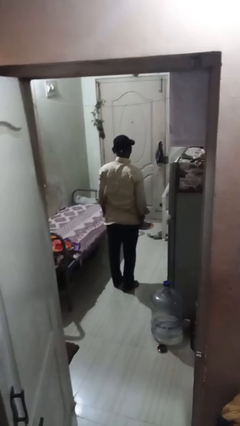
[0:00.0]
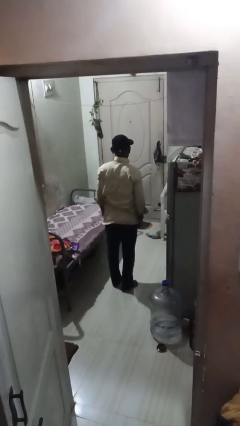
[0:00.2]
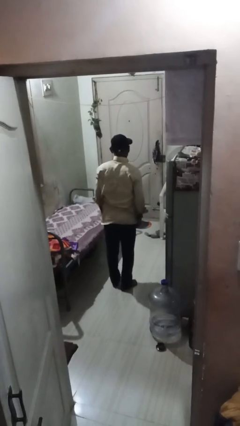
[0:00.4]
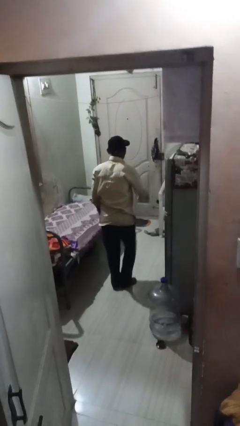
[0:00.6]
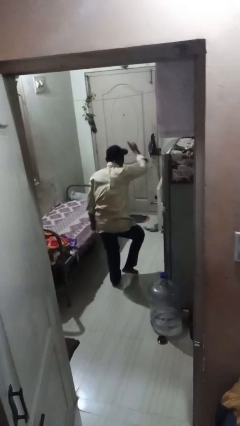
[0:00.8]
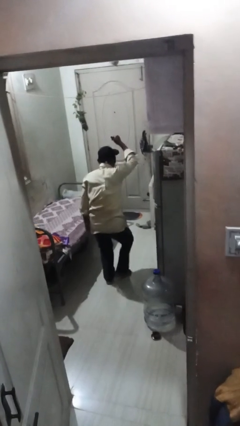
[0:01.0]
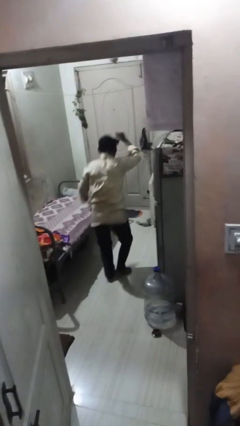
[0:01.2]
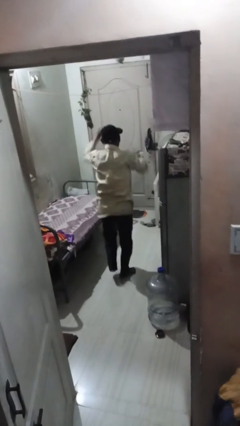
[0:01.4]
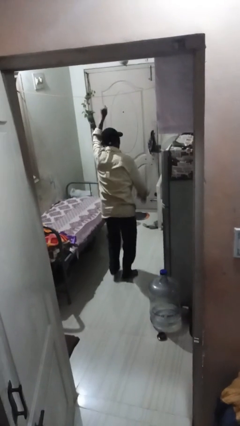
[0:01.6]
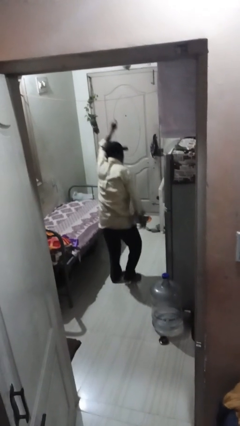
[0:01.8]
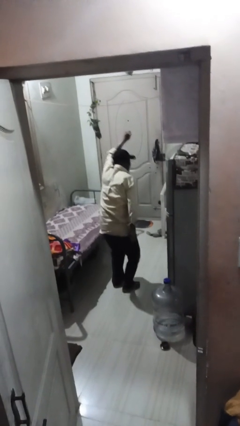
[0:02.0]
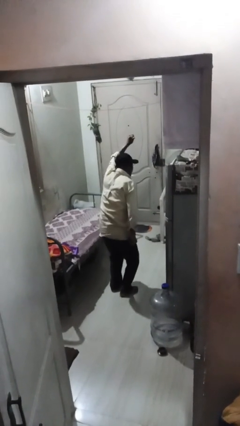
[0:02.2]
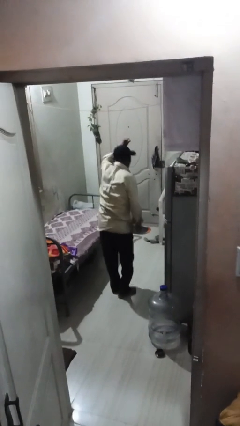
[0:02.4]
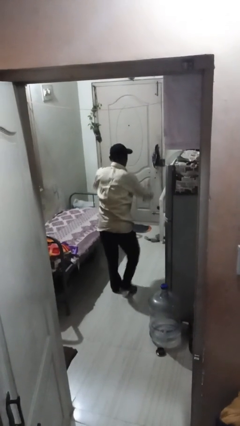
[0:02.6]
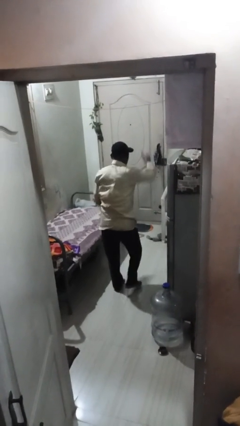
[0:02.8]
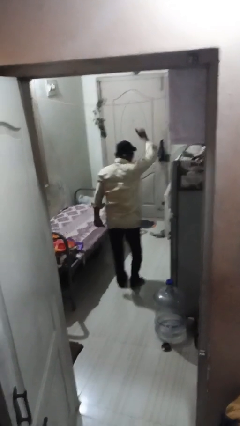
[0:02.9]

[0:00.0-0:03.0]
person dances in place

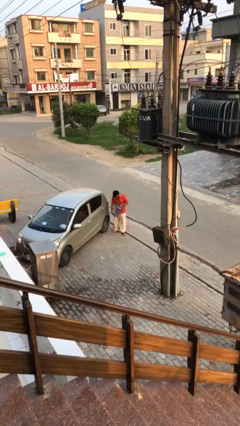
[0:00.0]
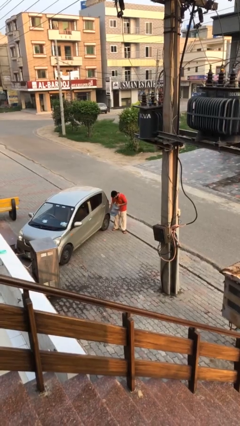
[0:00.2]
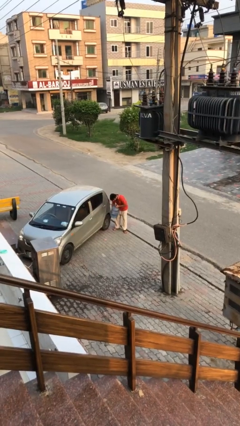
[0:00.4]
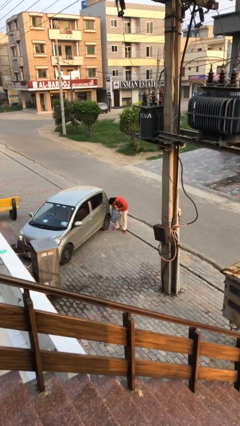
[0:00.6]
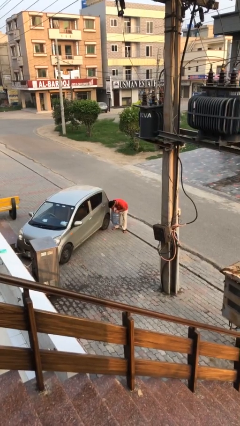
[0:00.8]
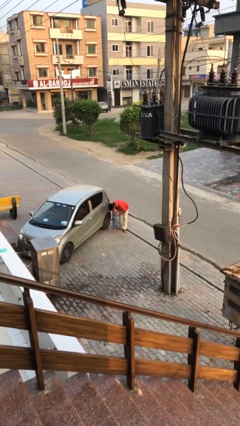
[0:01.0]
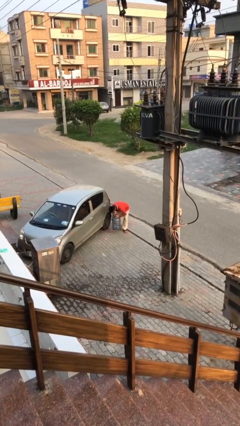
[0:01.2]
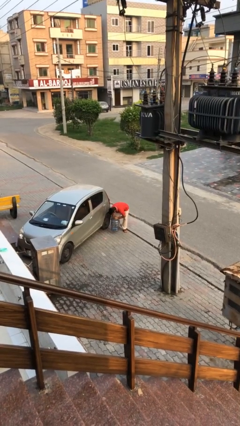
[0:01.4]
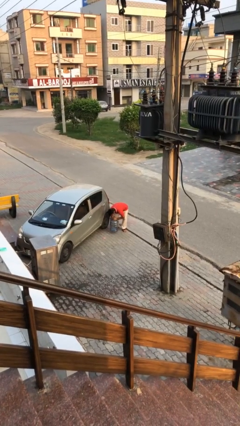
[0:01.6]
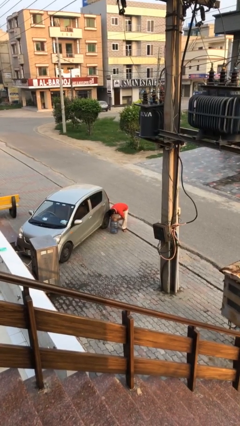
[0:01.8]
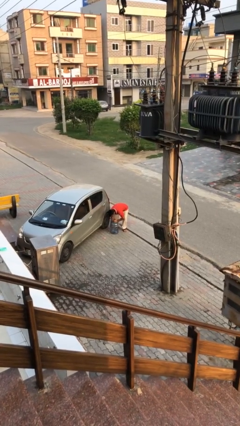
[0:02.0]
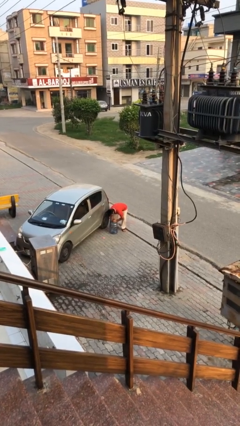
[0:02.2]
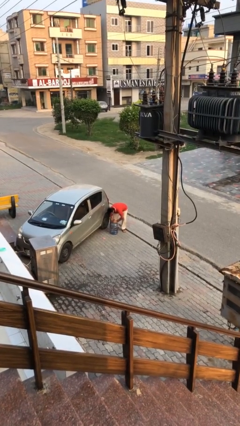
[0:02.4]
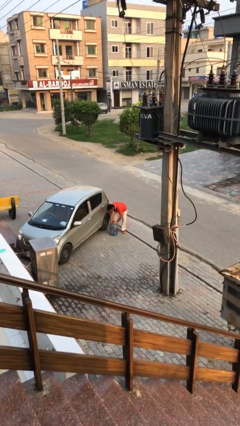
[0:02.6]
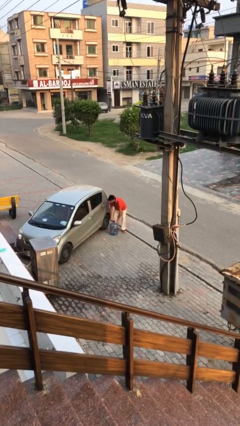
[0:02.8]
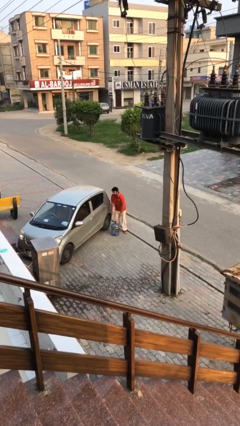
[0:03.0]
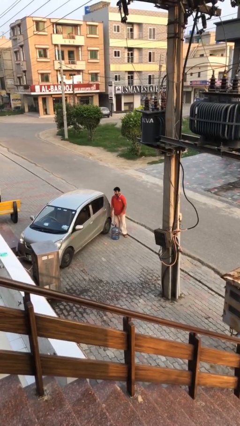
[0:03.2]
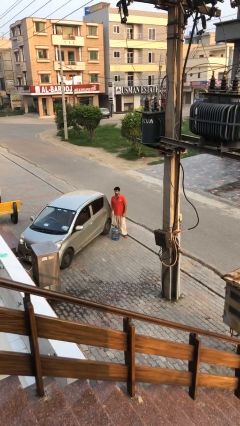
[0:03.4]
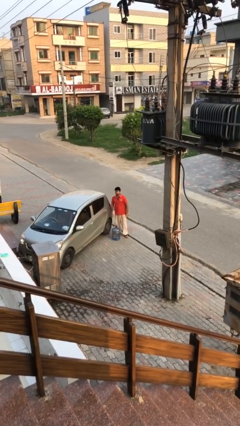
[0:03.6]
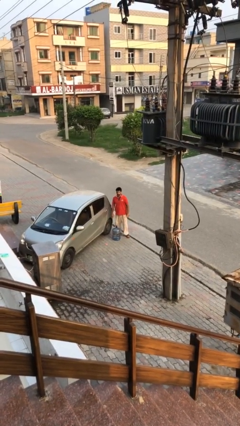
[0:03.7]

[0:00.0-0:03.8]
person puts down object on floor

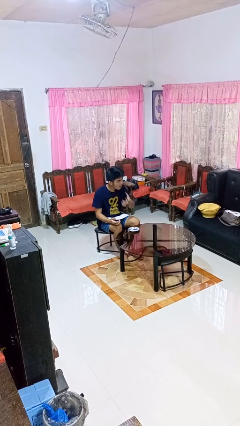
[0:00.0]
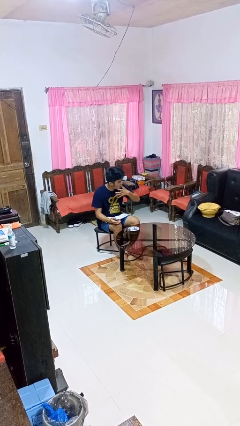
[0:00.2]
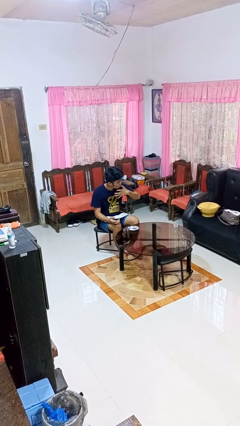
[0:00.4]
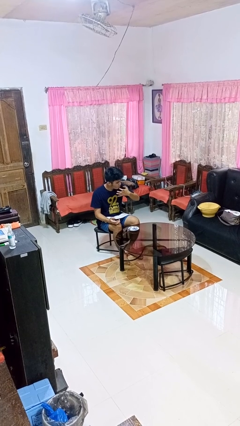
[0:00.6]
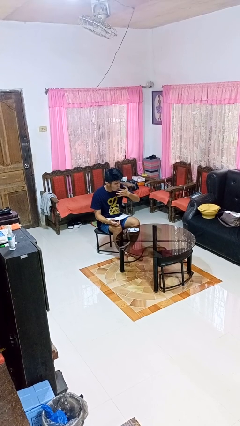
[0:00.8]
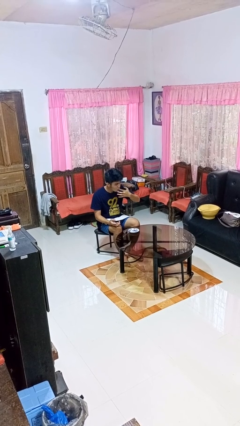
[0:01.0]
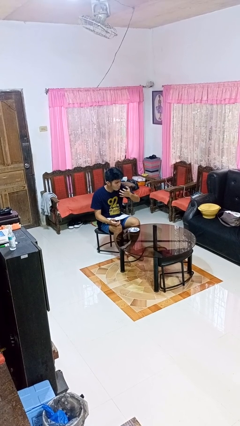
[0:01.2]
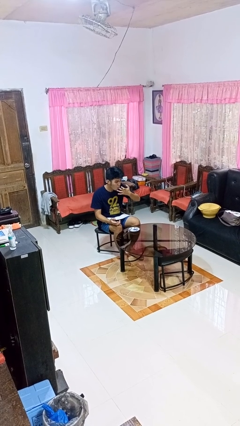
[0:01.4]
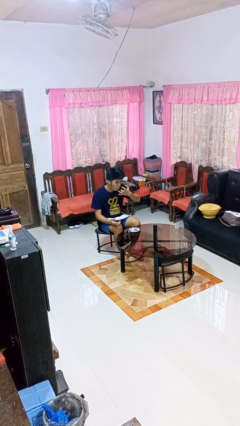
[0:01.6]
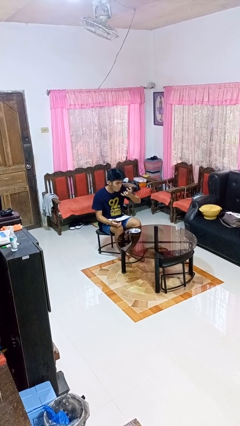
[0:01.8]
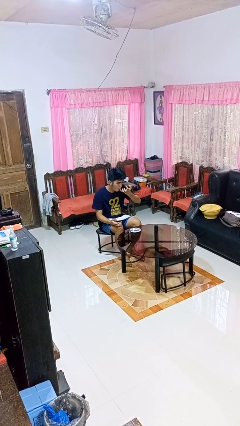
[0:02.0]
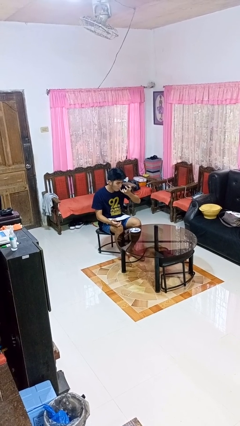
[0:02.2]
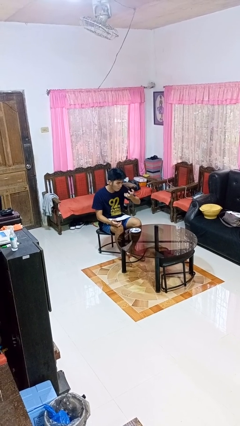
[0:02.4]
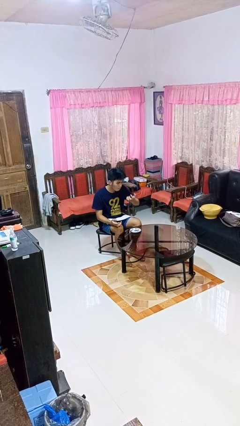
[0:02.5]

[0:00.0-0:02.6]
person licks fingers

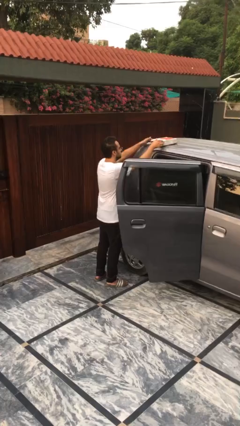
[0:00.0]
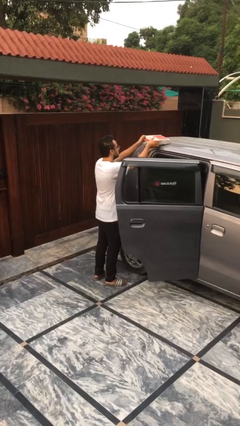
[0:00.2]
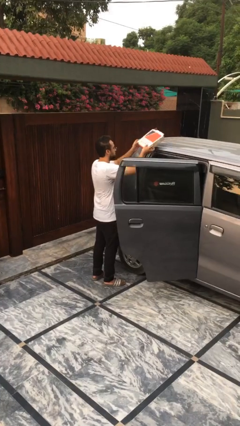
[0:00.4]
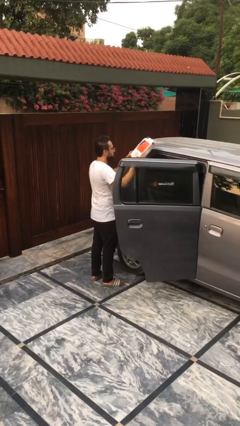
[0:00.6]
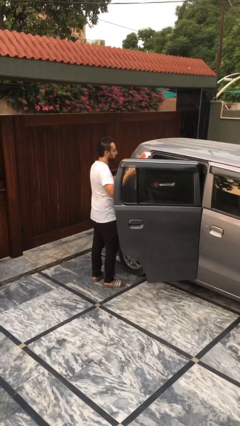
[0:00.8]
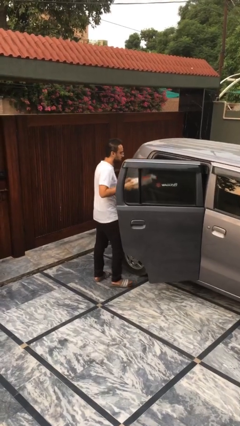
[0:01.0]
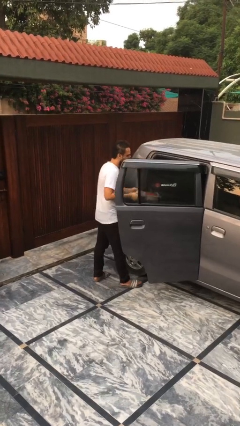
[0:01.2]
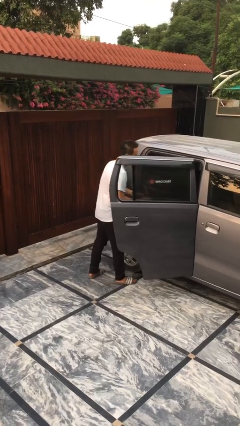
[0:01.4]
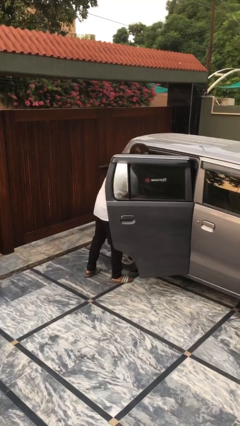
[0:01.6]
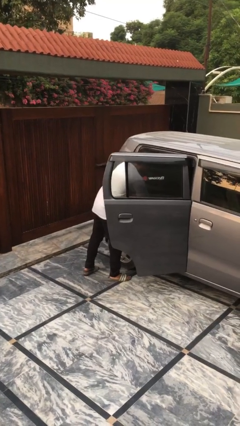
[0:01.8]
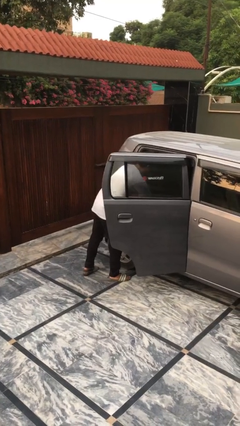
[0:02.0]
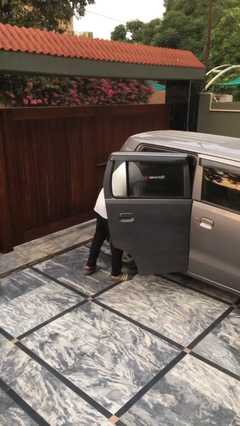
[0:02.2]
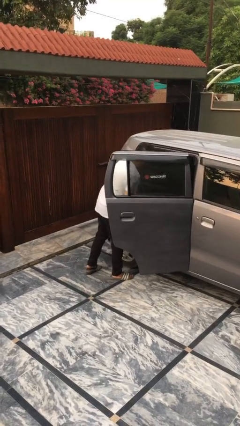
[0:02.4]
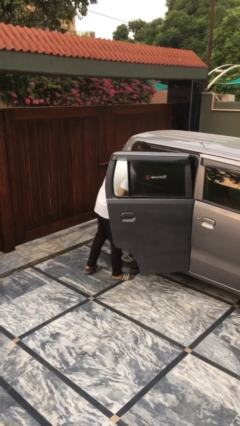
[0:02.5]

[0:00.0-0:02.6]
person loads car

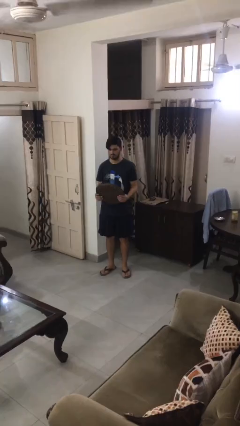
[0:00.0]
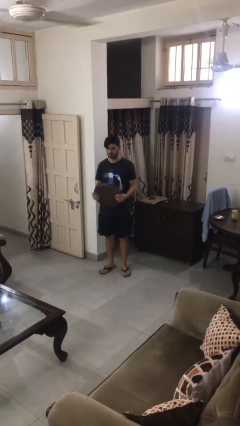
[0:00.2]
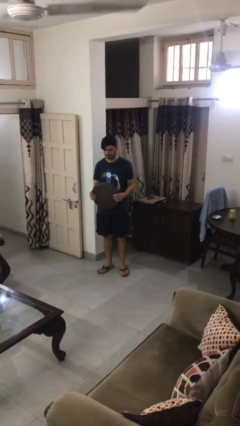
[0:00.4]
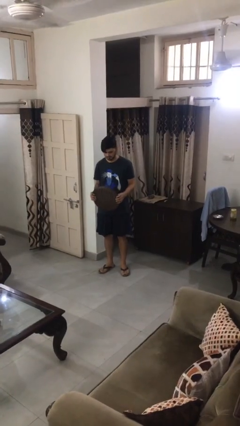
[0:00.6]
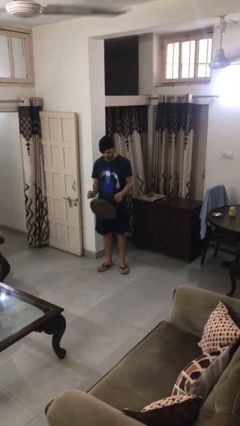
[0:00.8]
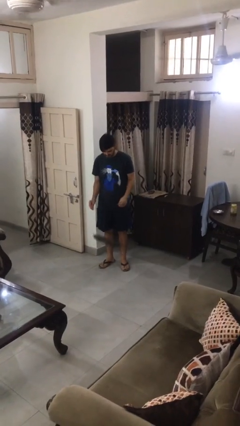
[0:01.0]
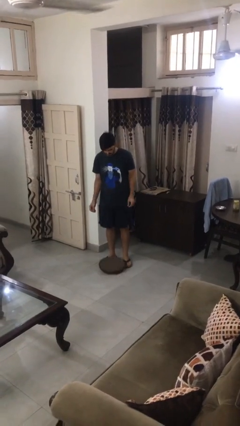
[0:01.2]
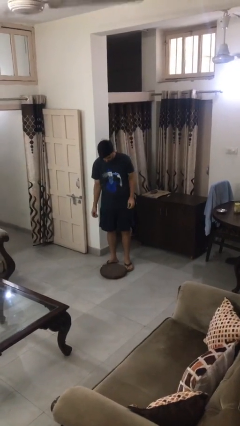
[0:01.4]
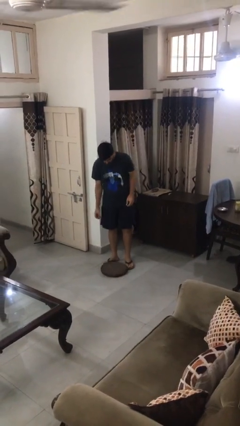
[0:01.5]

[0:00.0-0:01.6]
person drops object

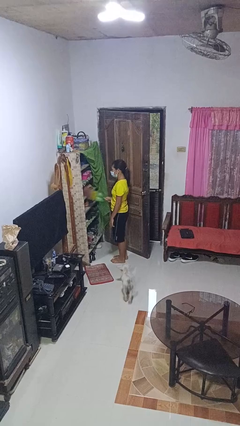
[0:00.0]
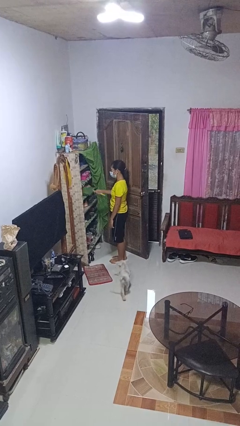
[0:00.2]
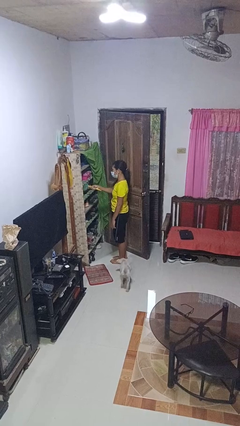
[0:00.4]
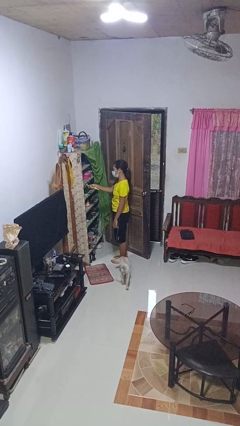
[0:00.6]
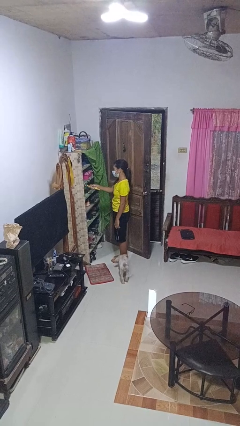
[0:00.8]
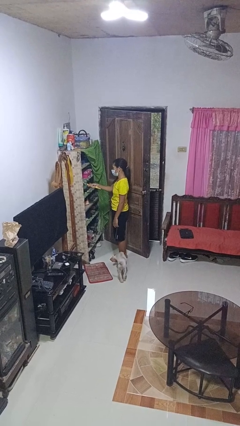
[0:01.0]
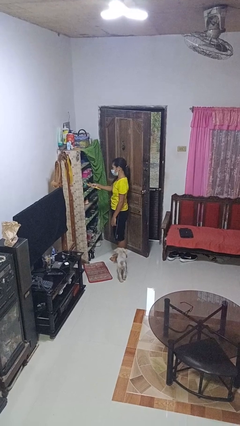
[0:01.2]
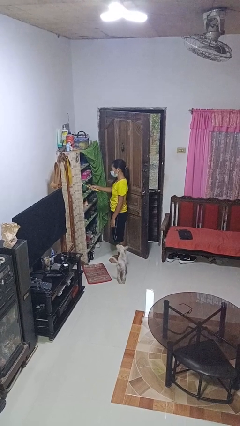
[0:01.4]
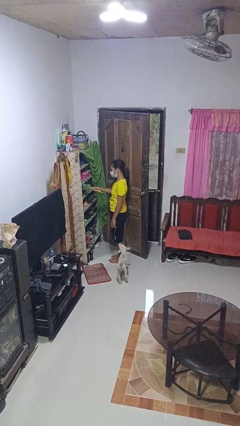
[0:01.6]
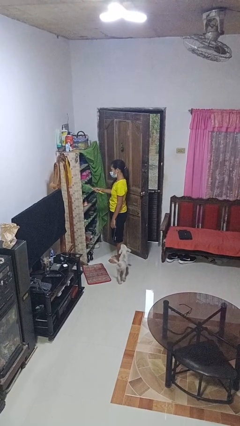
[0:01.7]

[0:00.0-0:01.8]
person dusts furniture

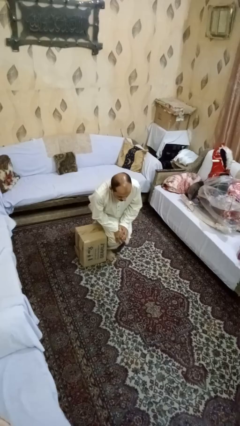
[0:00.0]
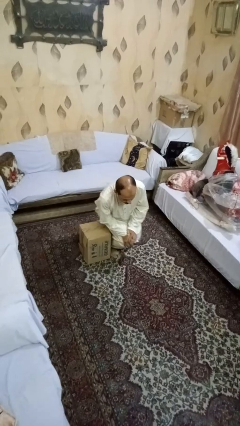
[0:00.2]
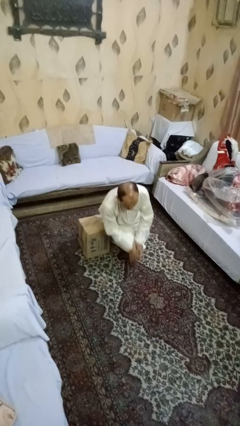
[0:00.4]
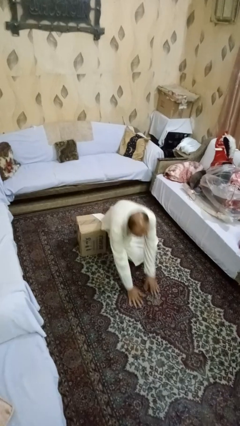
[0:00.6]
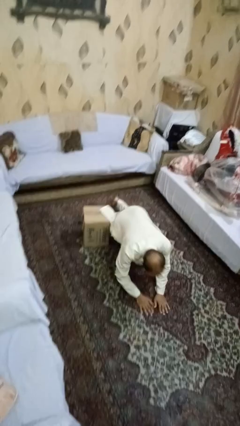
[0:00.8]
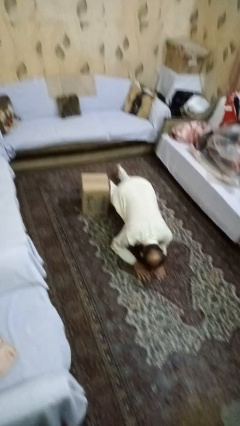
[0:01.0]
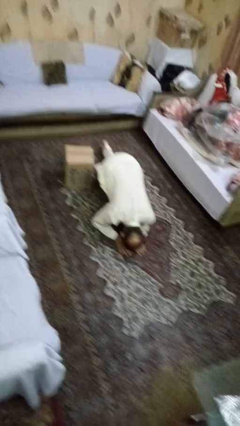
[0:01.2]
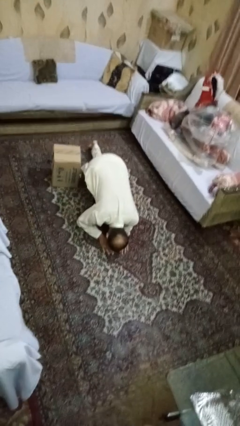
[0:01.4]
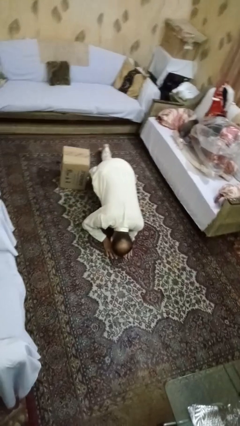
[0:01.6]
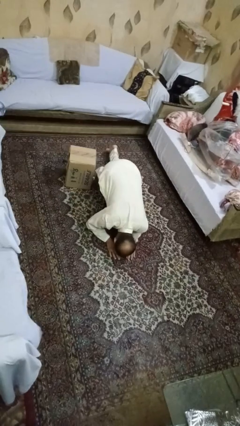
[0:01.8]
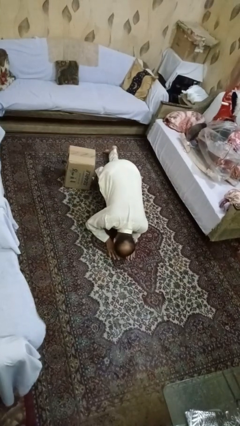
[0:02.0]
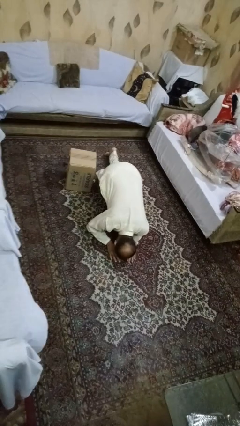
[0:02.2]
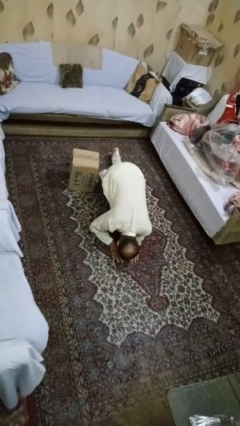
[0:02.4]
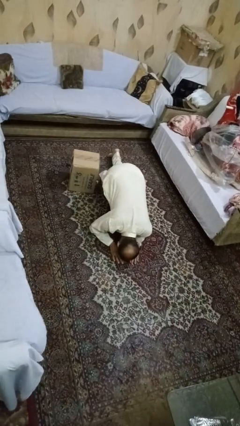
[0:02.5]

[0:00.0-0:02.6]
person lies down on floor
